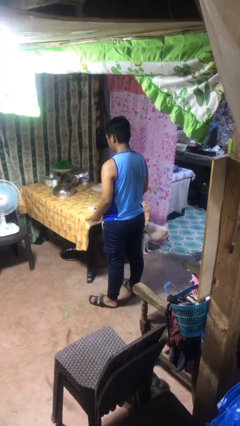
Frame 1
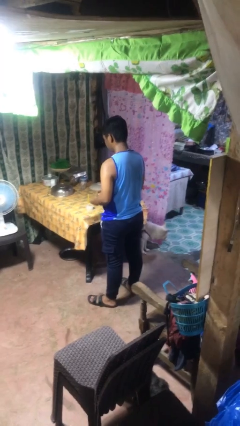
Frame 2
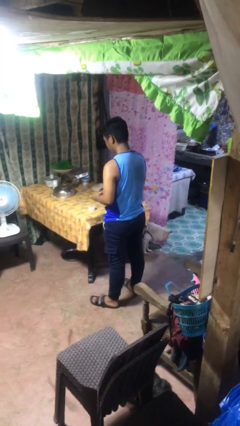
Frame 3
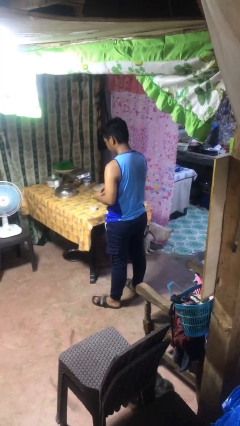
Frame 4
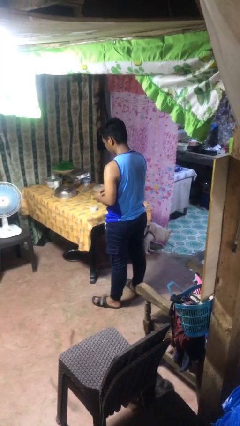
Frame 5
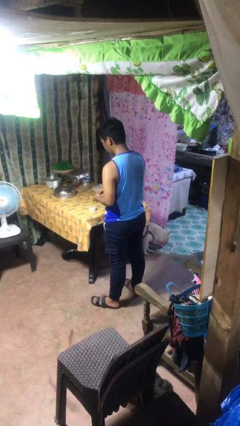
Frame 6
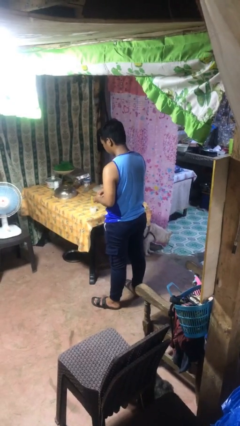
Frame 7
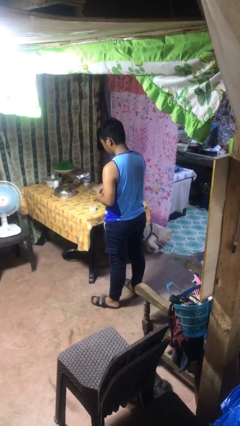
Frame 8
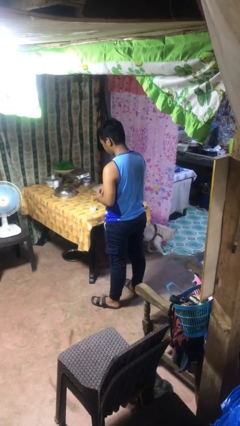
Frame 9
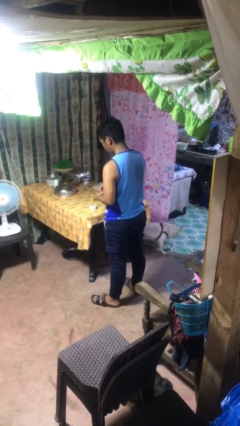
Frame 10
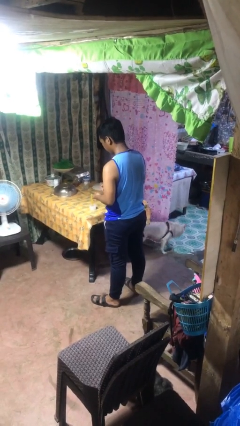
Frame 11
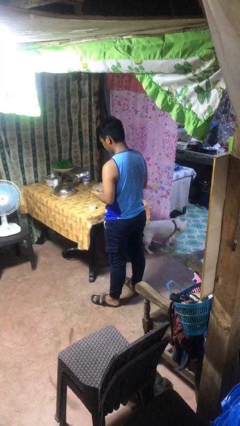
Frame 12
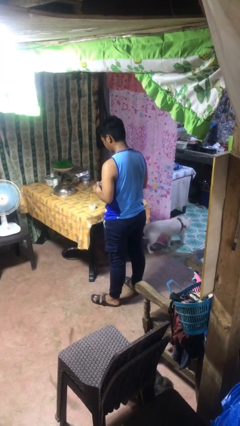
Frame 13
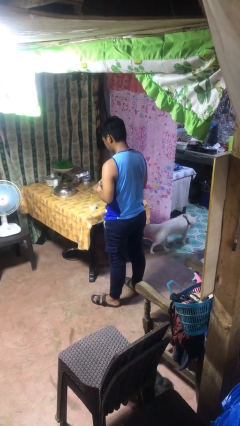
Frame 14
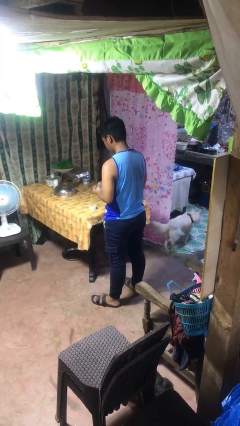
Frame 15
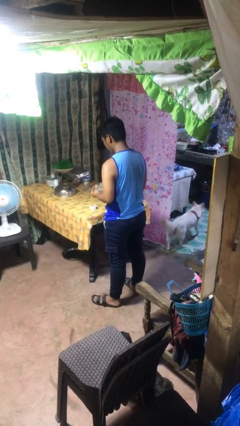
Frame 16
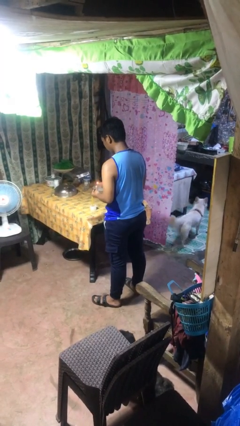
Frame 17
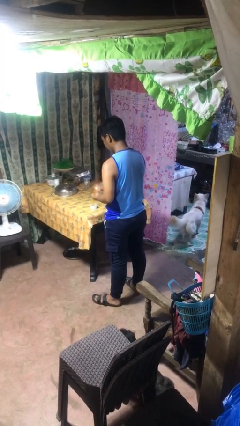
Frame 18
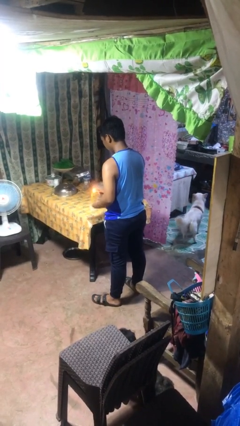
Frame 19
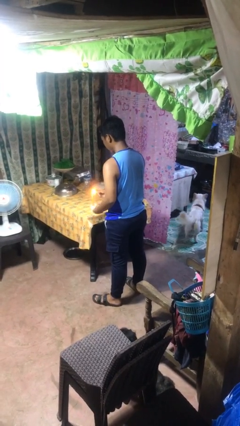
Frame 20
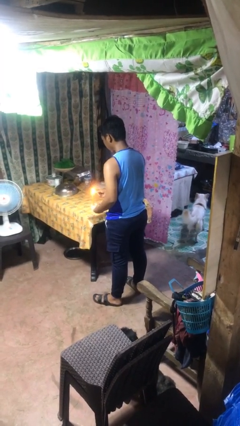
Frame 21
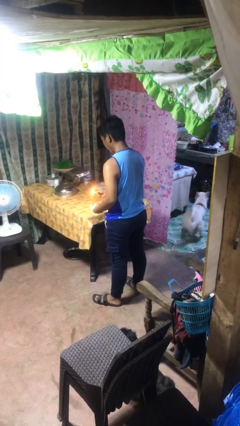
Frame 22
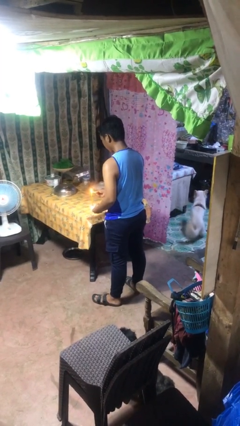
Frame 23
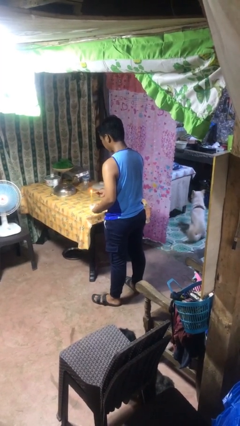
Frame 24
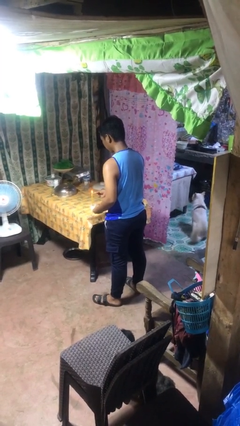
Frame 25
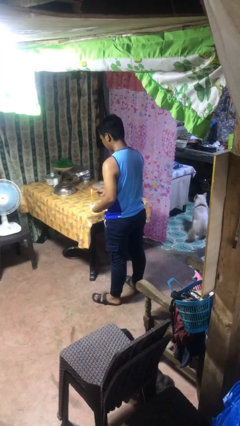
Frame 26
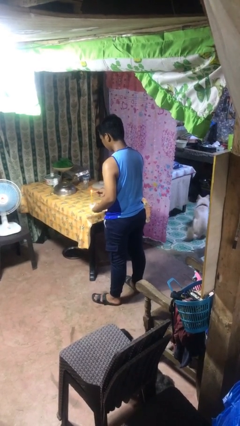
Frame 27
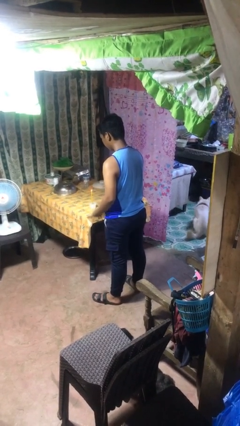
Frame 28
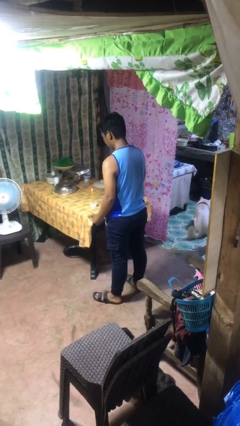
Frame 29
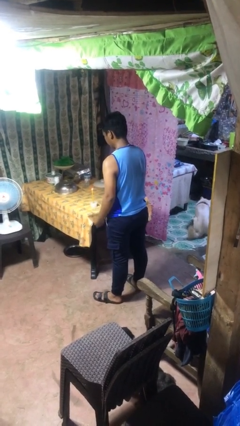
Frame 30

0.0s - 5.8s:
person lights candle

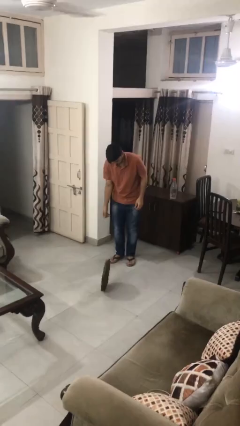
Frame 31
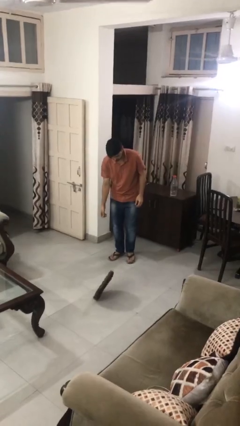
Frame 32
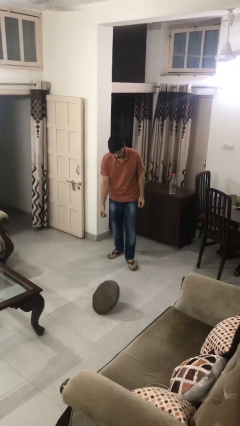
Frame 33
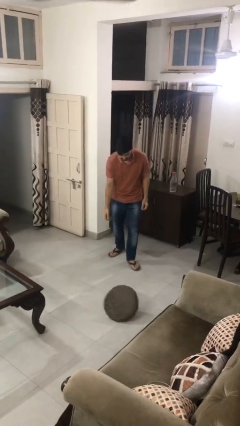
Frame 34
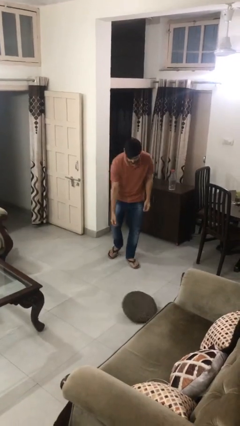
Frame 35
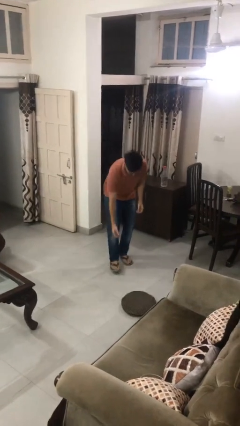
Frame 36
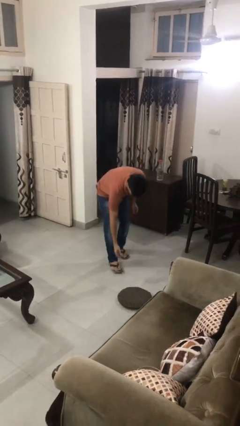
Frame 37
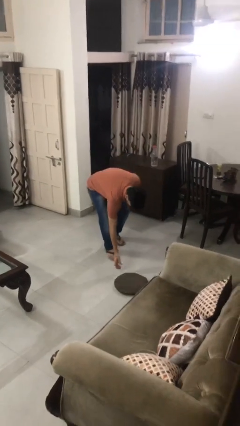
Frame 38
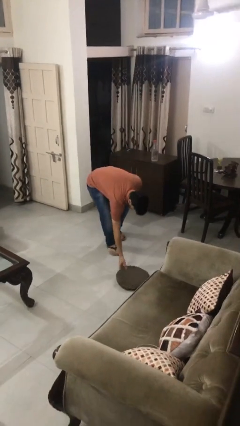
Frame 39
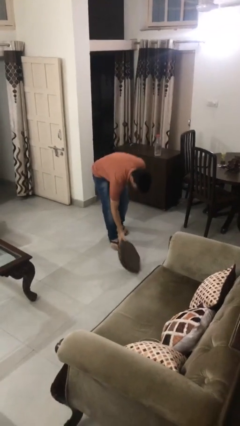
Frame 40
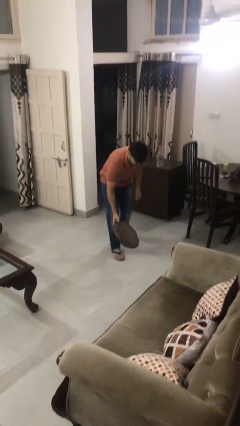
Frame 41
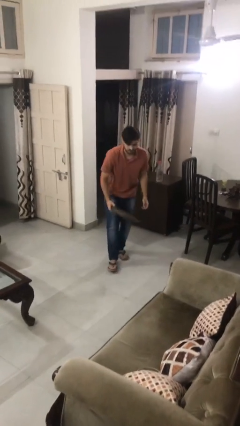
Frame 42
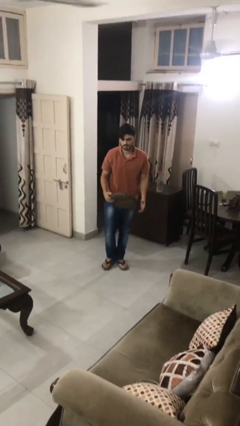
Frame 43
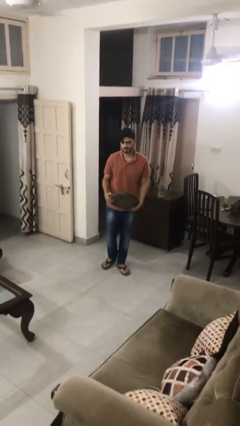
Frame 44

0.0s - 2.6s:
person picks up object from floor

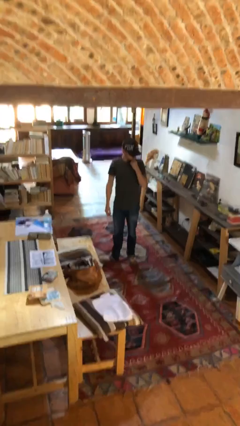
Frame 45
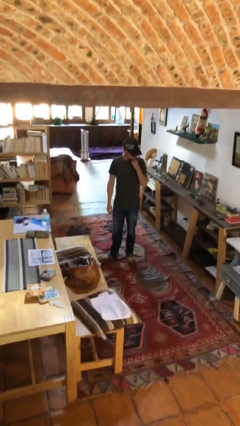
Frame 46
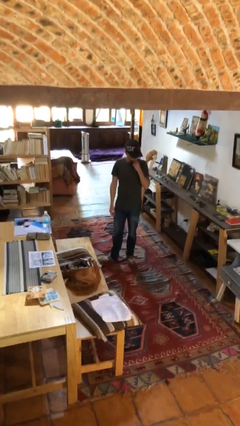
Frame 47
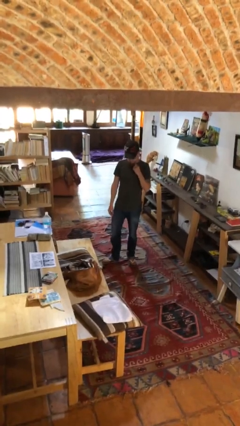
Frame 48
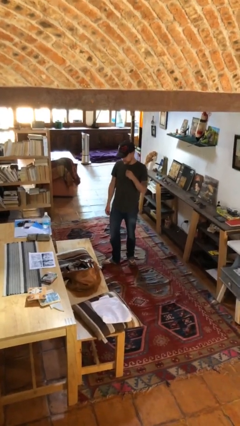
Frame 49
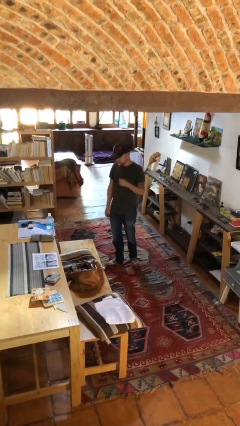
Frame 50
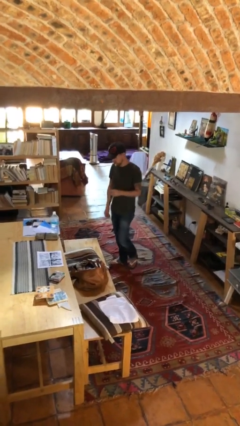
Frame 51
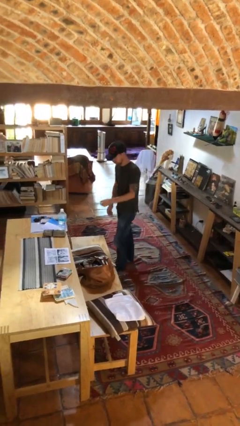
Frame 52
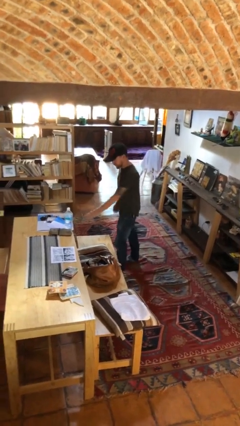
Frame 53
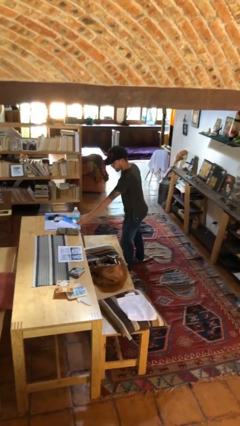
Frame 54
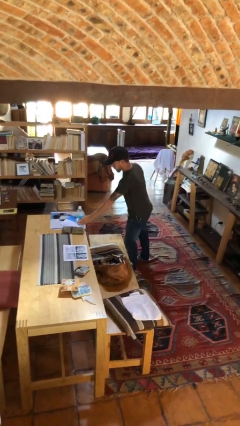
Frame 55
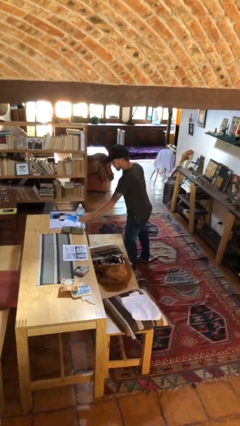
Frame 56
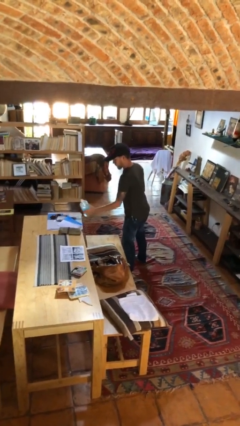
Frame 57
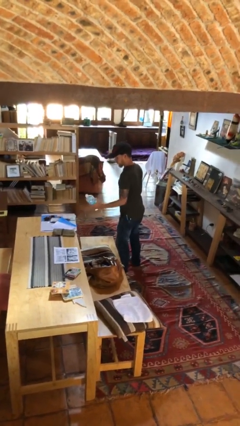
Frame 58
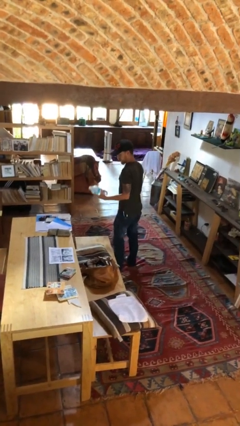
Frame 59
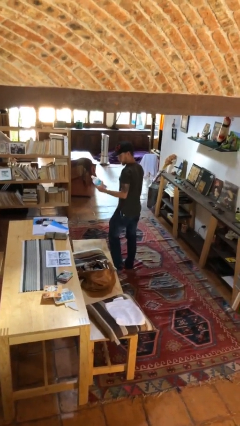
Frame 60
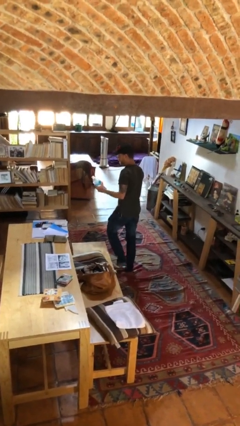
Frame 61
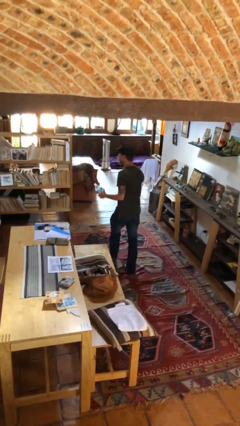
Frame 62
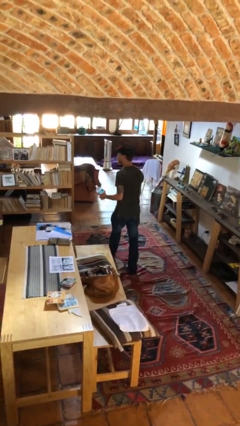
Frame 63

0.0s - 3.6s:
person picks up object from table

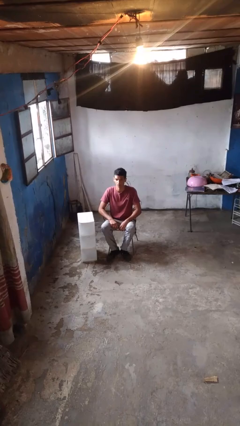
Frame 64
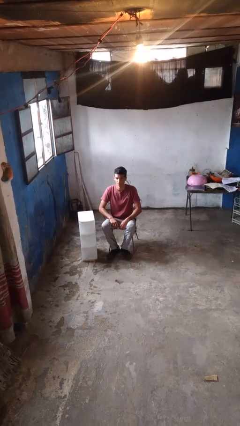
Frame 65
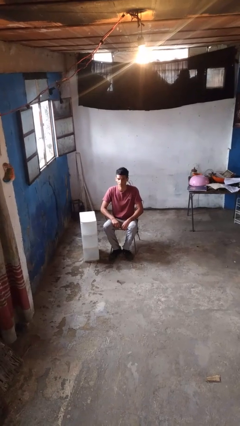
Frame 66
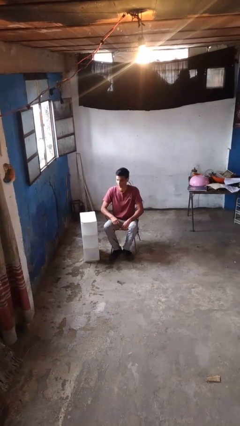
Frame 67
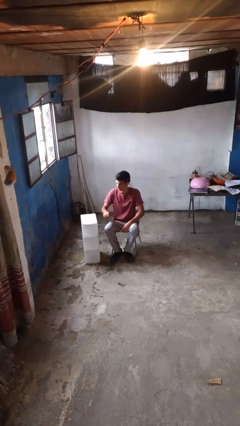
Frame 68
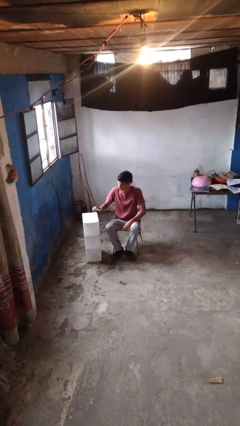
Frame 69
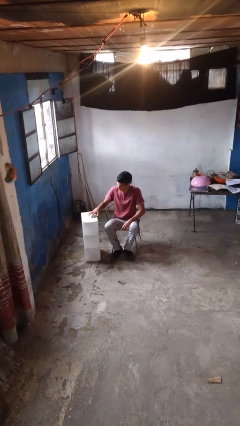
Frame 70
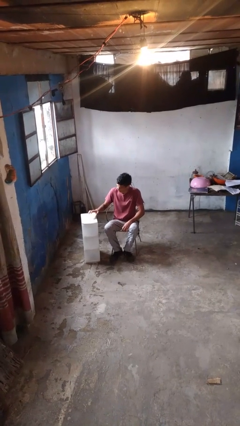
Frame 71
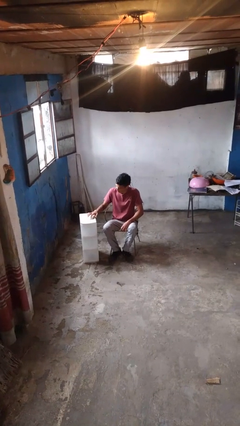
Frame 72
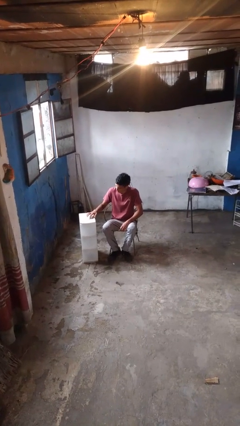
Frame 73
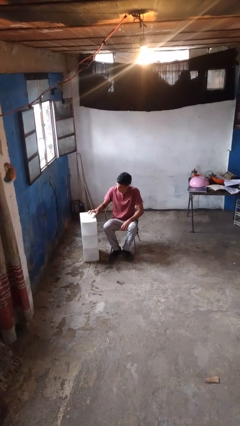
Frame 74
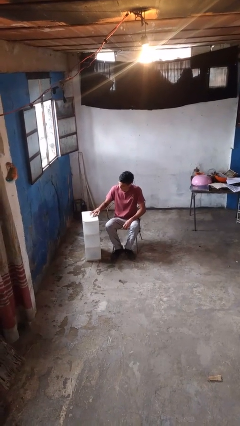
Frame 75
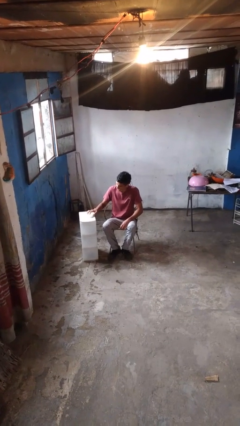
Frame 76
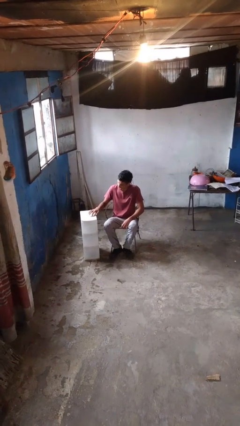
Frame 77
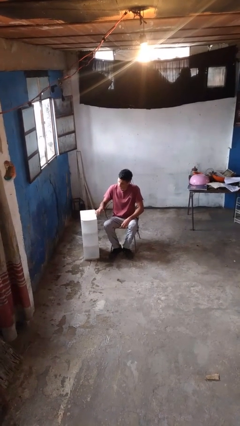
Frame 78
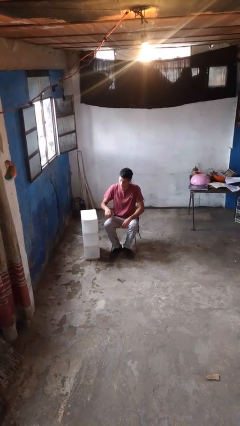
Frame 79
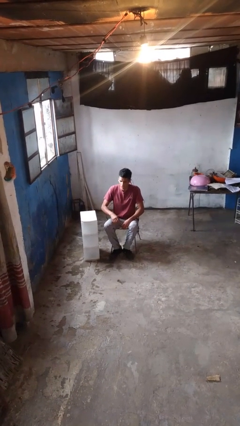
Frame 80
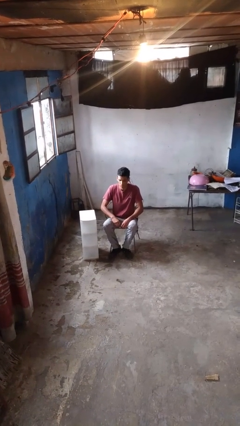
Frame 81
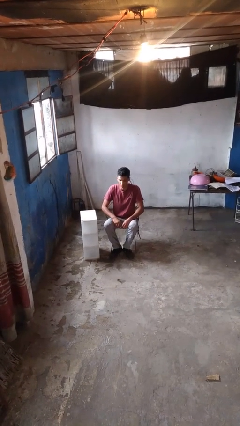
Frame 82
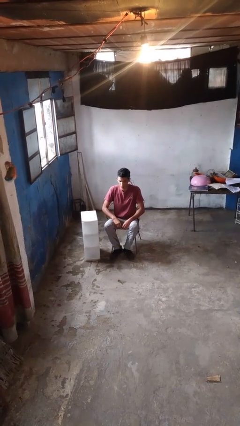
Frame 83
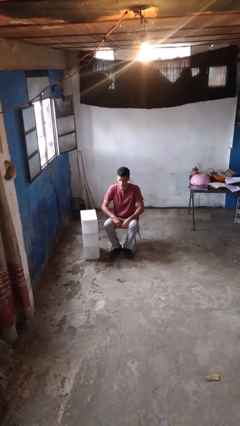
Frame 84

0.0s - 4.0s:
person taps object with finger

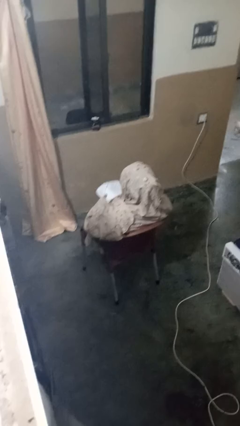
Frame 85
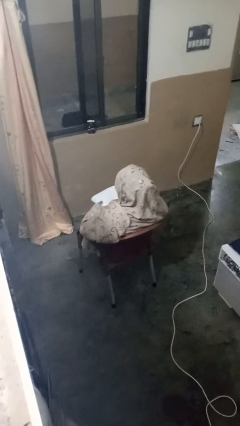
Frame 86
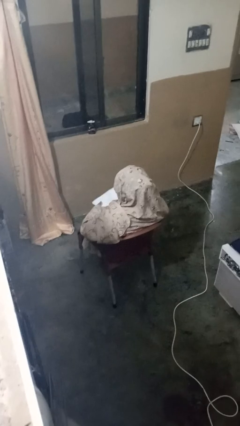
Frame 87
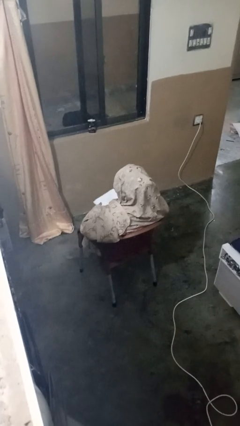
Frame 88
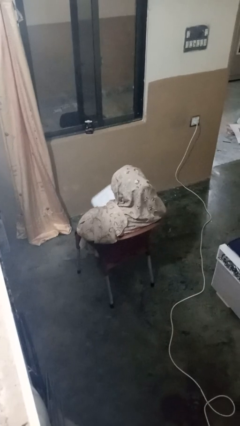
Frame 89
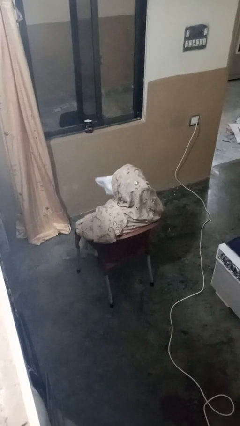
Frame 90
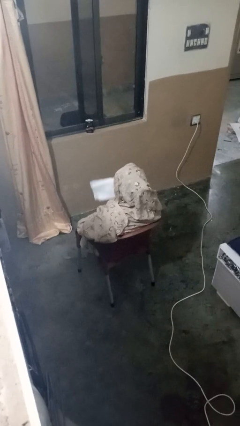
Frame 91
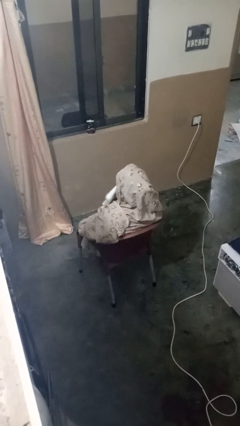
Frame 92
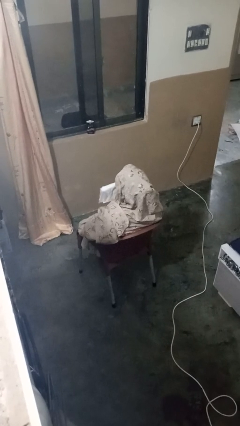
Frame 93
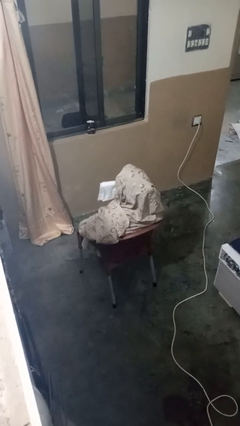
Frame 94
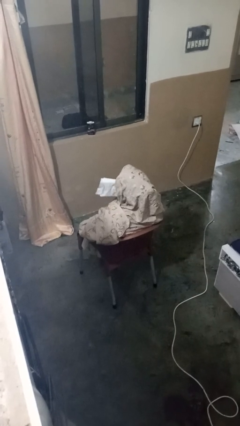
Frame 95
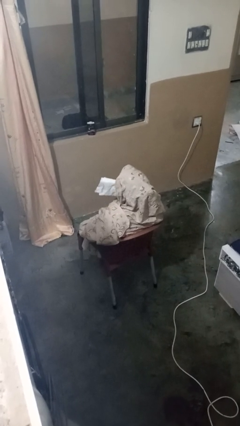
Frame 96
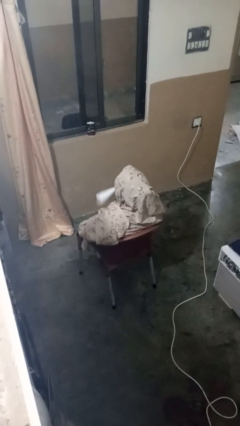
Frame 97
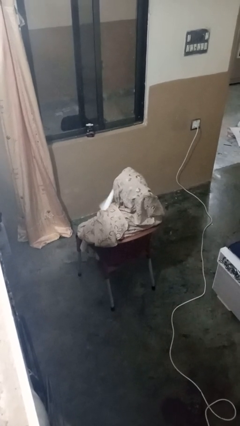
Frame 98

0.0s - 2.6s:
person wipes mouth with napkin
